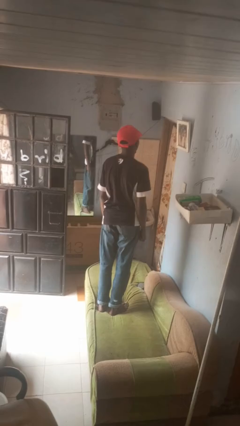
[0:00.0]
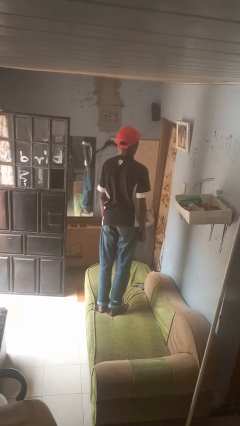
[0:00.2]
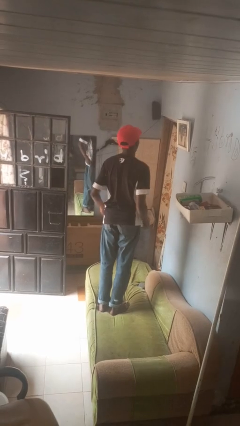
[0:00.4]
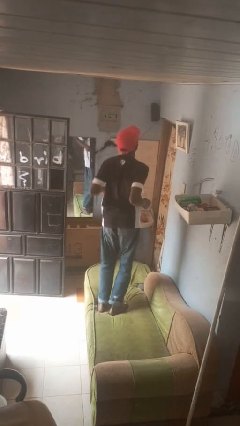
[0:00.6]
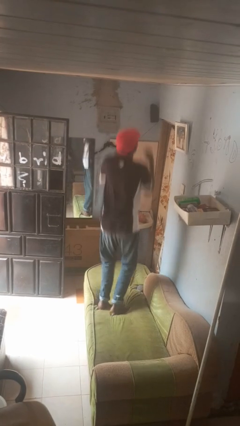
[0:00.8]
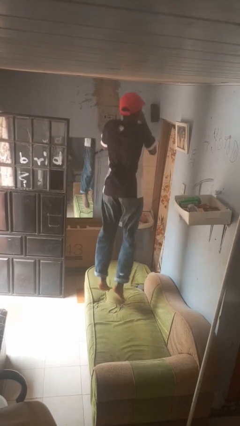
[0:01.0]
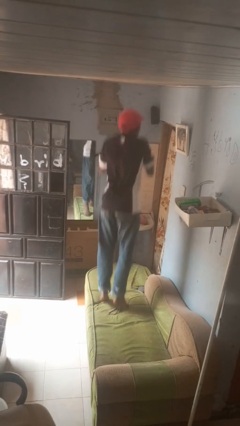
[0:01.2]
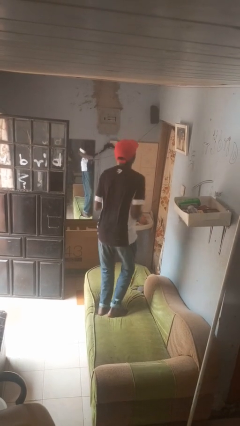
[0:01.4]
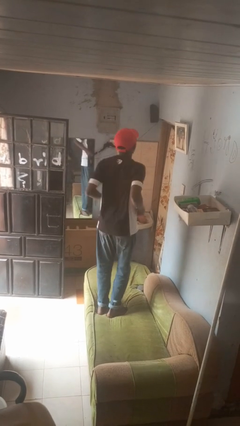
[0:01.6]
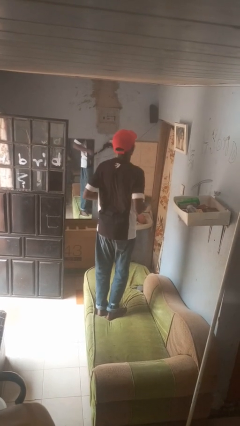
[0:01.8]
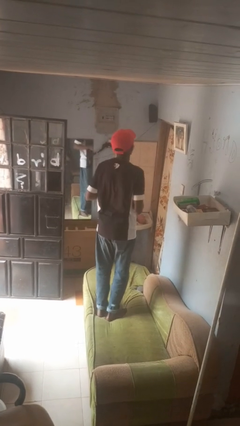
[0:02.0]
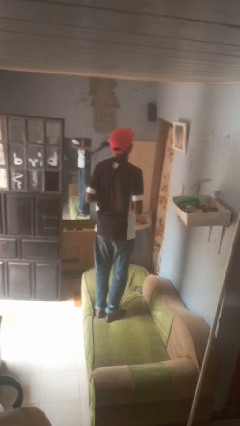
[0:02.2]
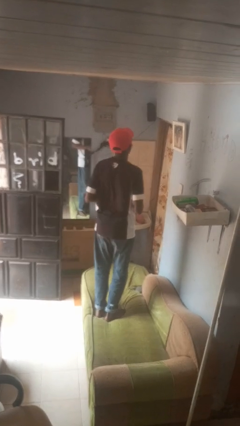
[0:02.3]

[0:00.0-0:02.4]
person jumps on couch

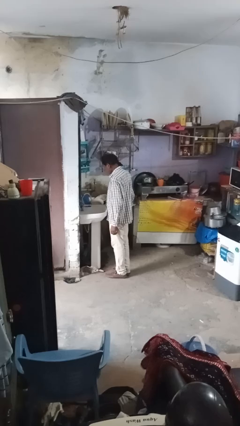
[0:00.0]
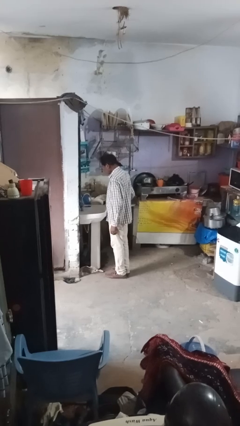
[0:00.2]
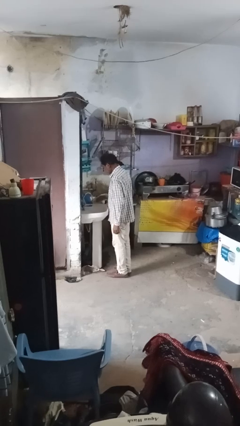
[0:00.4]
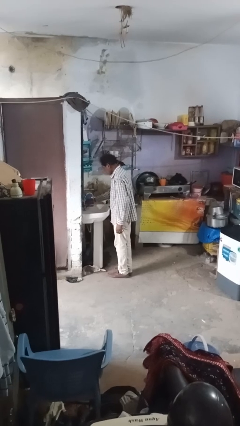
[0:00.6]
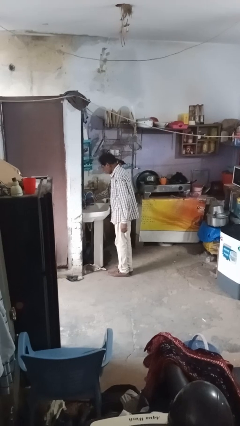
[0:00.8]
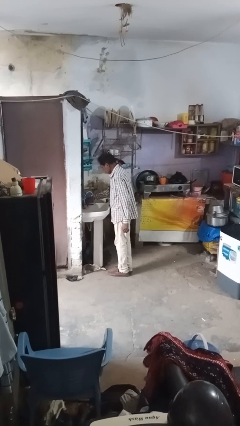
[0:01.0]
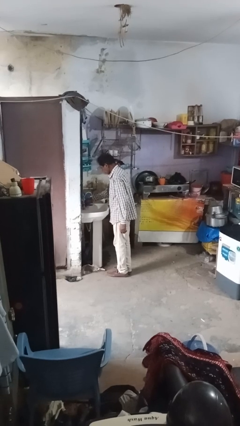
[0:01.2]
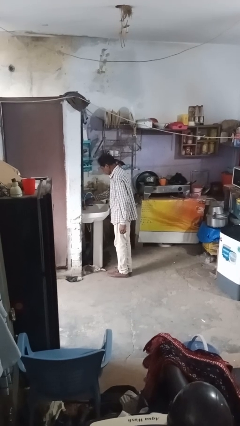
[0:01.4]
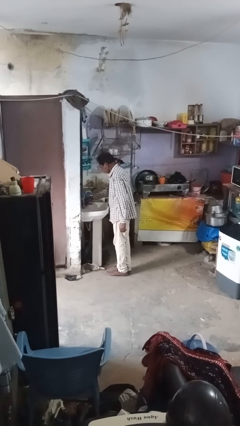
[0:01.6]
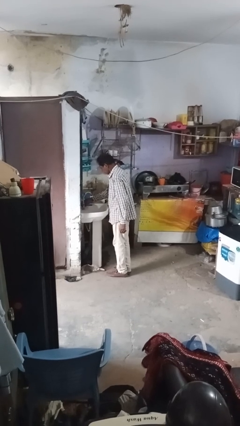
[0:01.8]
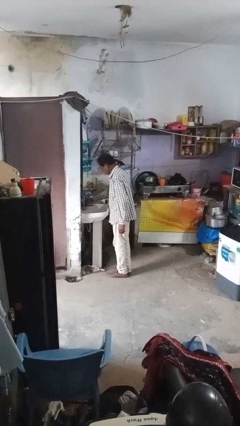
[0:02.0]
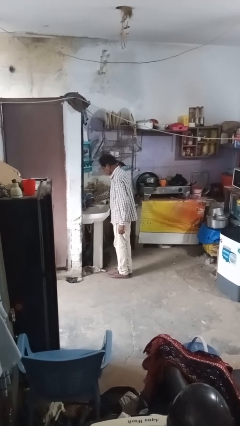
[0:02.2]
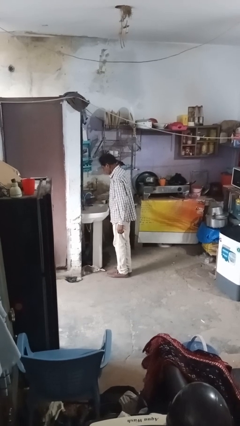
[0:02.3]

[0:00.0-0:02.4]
person turns off faucet

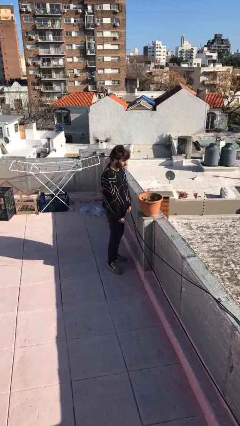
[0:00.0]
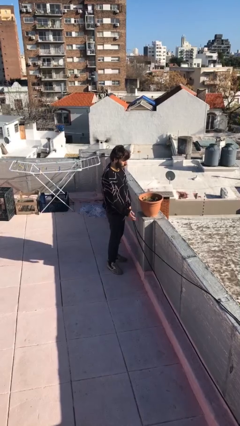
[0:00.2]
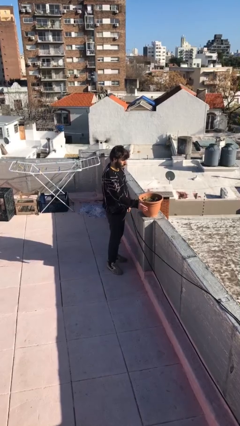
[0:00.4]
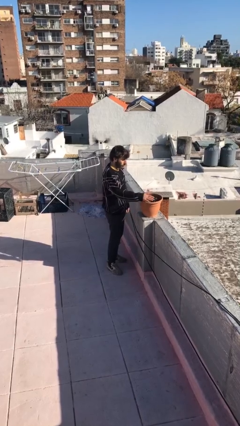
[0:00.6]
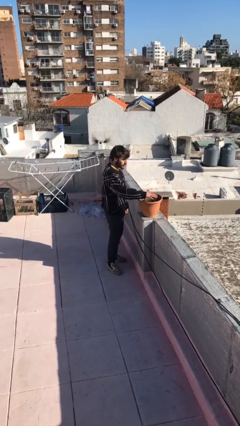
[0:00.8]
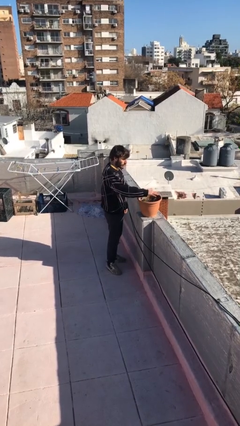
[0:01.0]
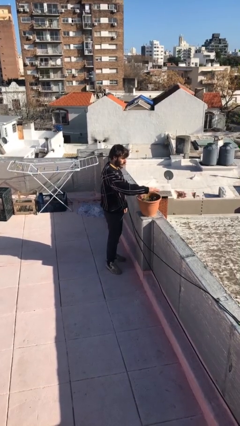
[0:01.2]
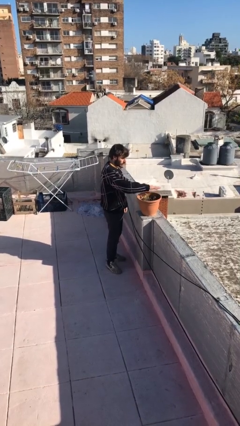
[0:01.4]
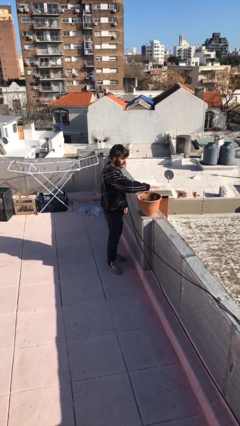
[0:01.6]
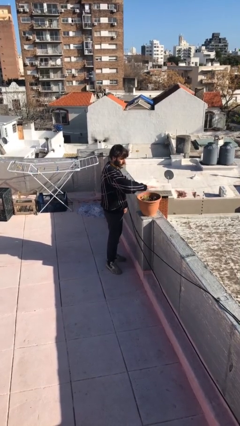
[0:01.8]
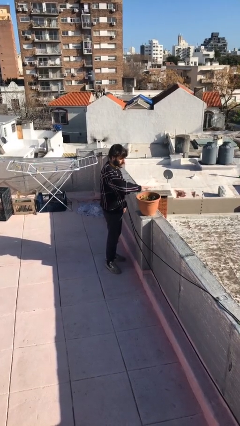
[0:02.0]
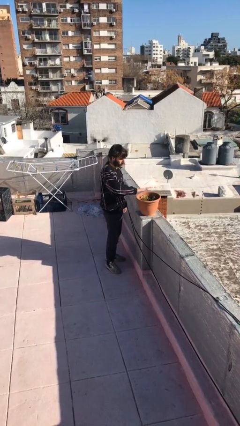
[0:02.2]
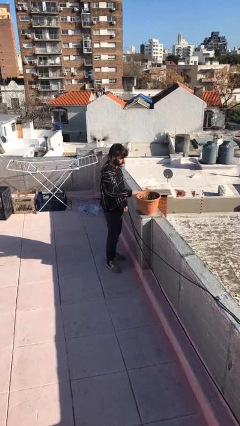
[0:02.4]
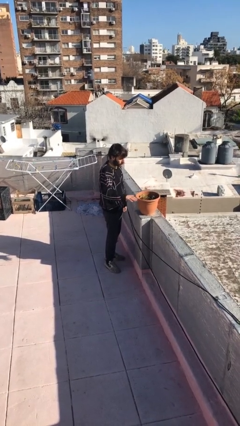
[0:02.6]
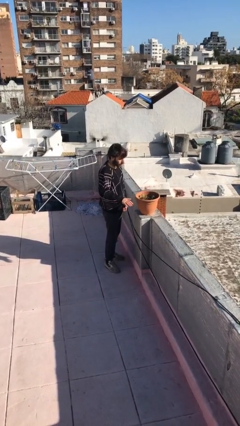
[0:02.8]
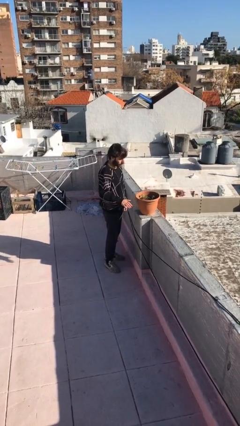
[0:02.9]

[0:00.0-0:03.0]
person waves hand over object

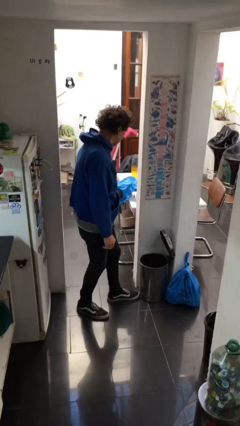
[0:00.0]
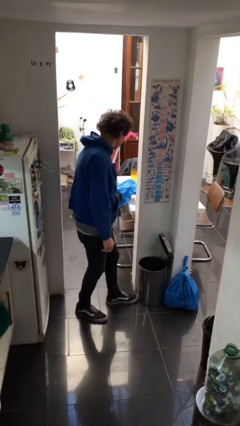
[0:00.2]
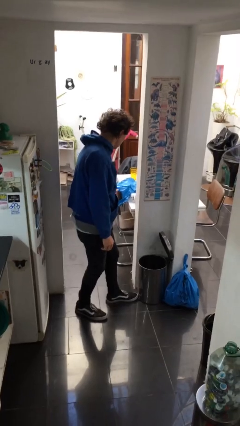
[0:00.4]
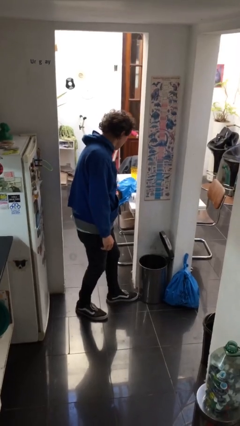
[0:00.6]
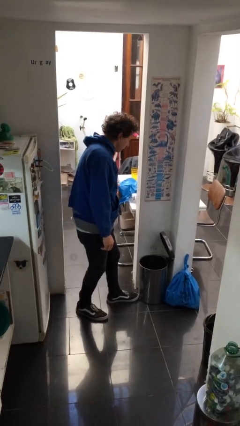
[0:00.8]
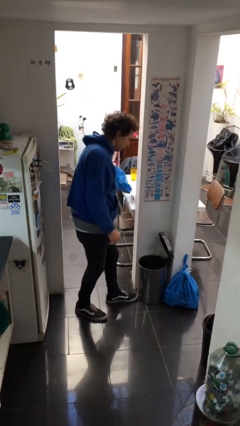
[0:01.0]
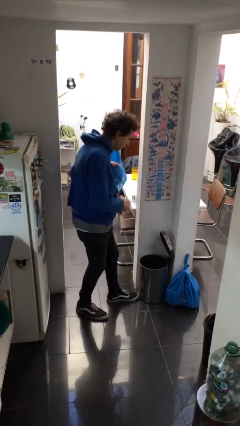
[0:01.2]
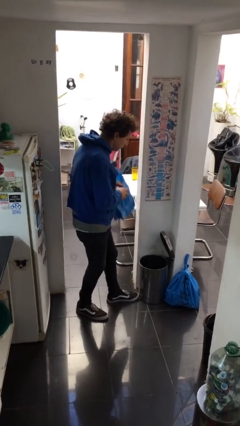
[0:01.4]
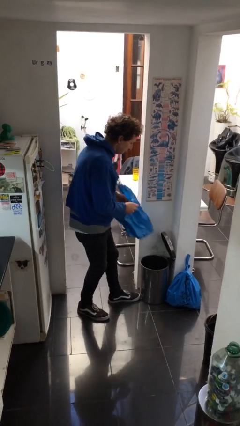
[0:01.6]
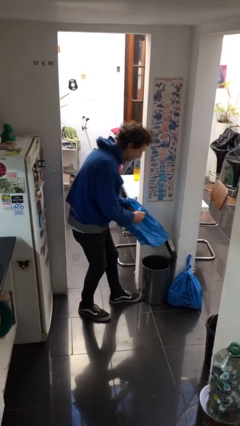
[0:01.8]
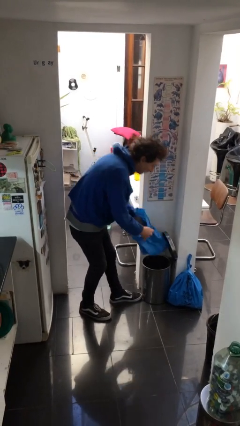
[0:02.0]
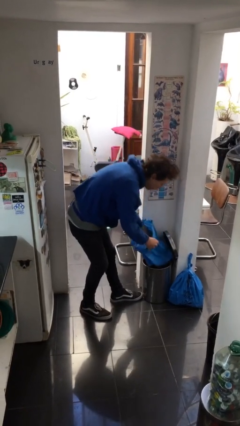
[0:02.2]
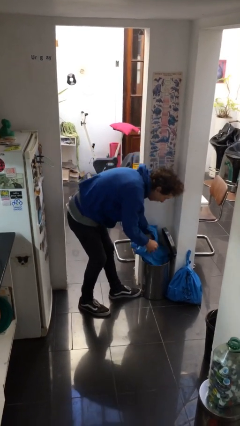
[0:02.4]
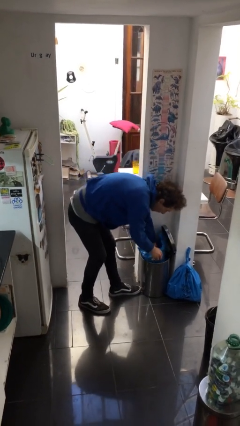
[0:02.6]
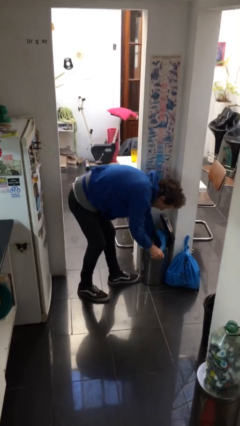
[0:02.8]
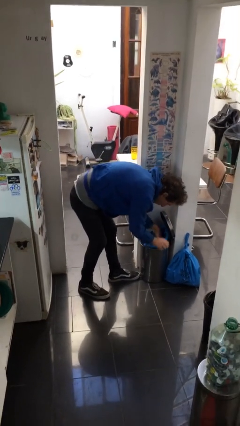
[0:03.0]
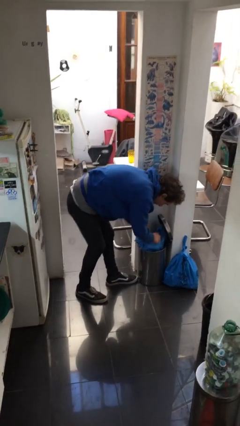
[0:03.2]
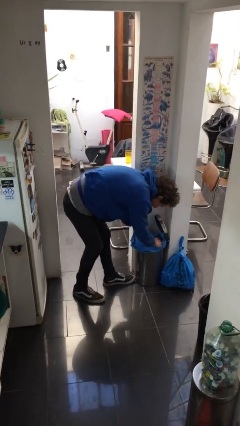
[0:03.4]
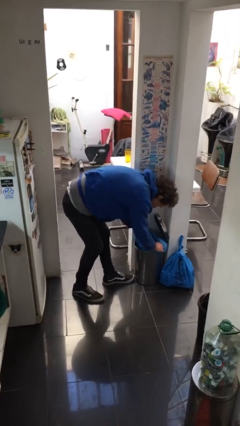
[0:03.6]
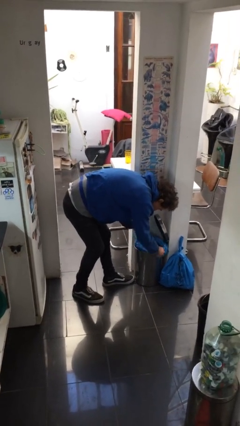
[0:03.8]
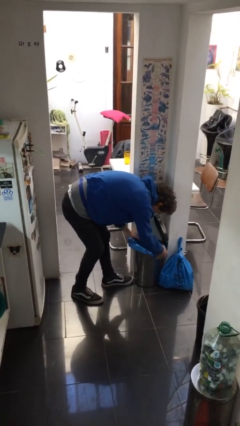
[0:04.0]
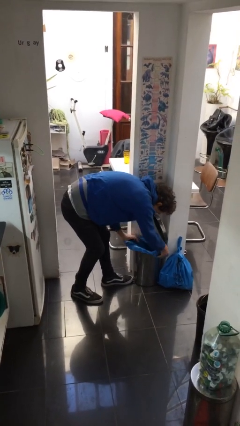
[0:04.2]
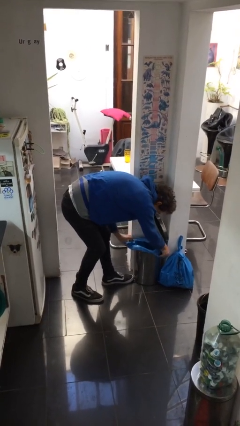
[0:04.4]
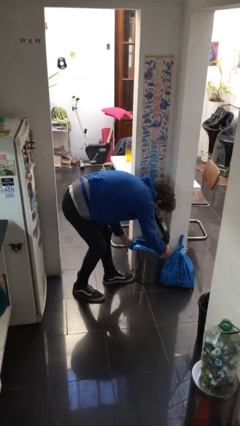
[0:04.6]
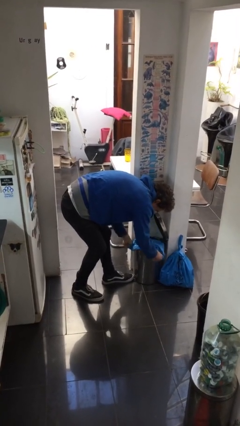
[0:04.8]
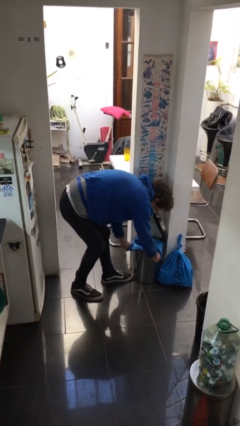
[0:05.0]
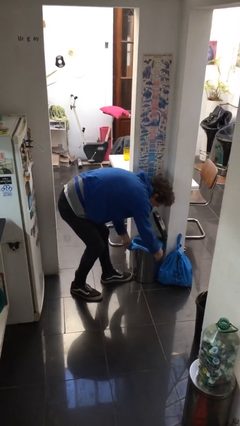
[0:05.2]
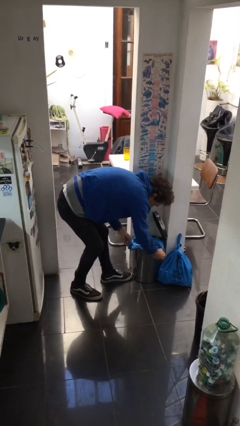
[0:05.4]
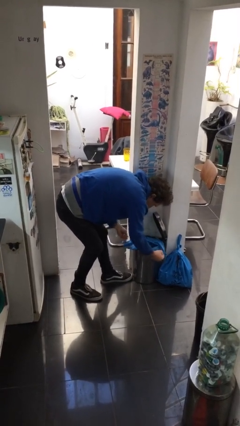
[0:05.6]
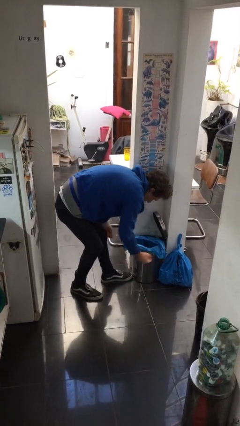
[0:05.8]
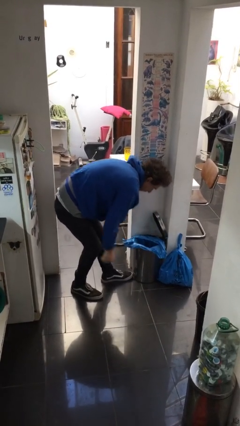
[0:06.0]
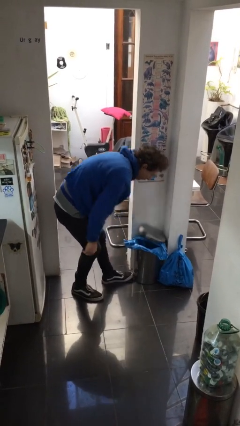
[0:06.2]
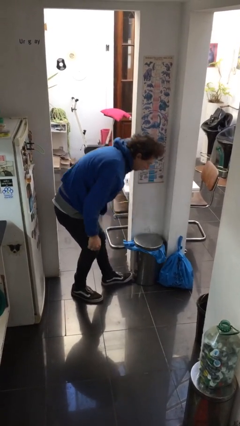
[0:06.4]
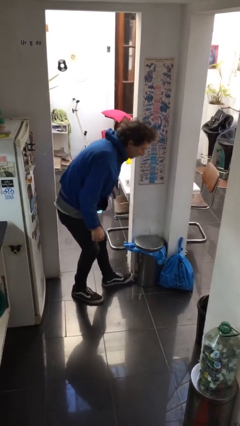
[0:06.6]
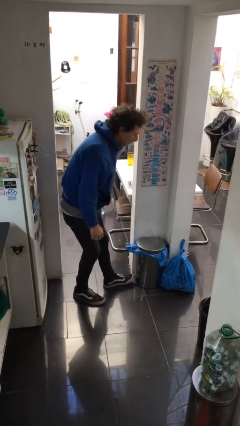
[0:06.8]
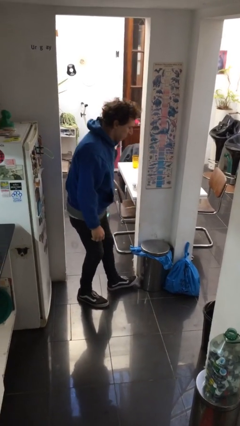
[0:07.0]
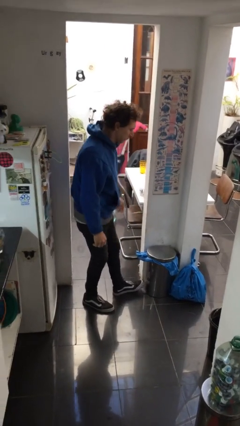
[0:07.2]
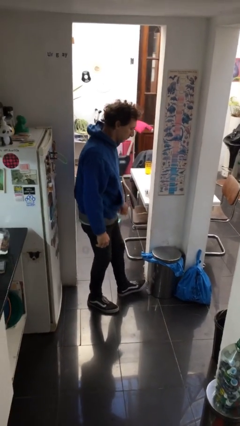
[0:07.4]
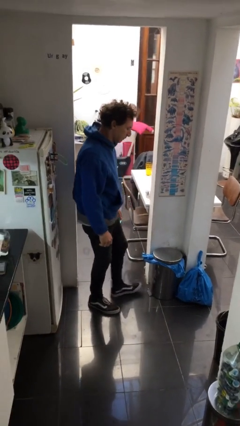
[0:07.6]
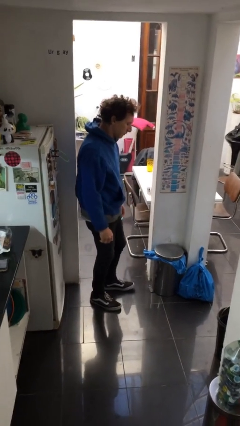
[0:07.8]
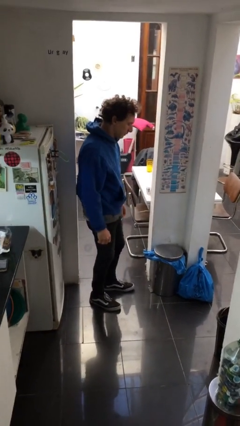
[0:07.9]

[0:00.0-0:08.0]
person inserts trashbag into trashcan

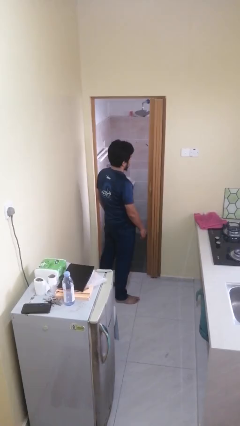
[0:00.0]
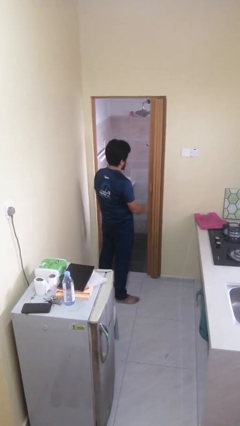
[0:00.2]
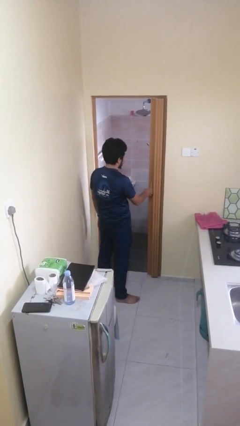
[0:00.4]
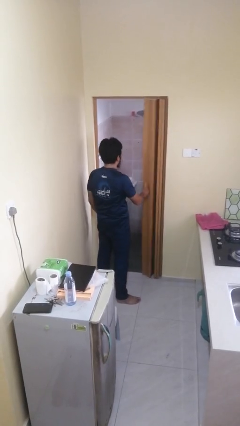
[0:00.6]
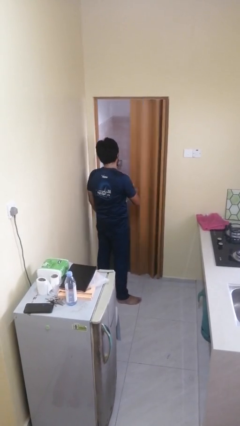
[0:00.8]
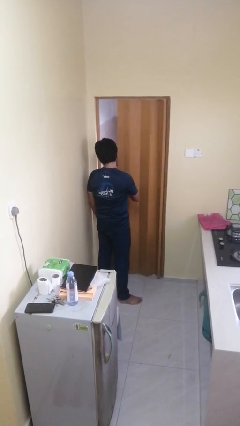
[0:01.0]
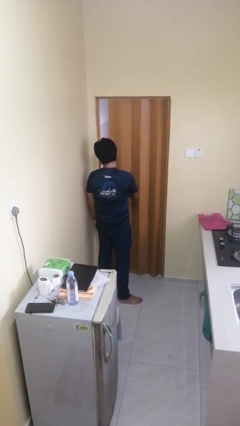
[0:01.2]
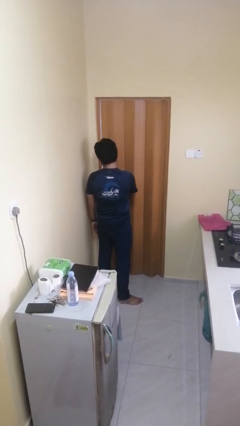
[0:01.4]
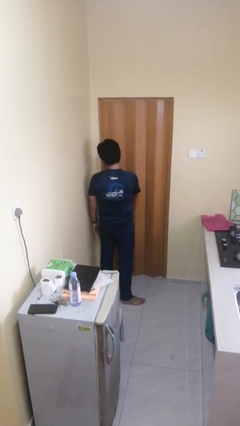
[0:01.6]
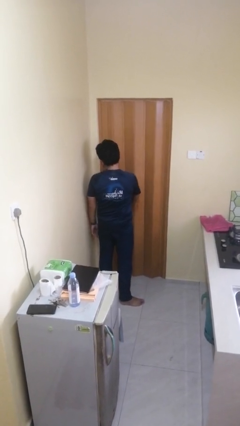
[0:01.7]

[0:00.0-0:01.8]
person closes sliding door
